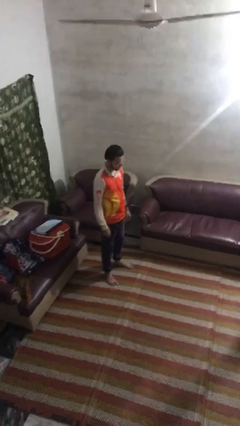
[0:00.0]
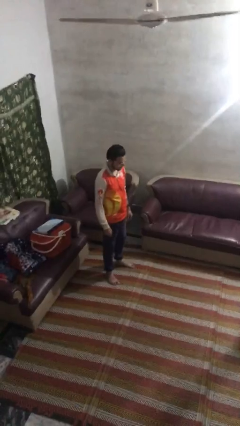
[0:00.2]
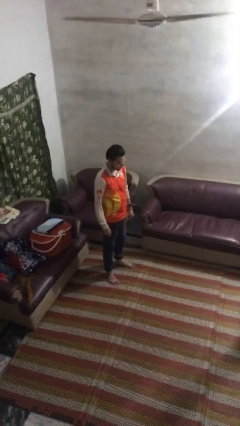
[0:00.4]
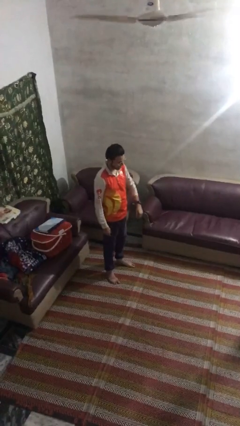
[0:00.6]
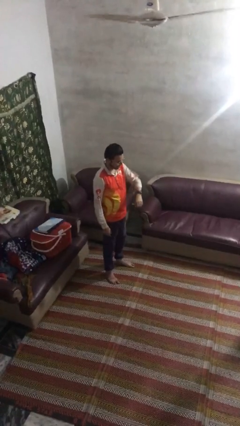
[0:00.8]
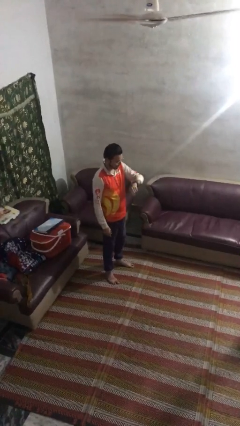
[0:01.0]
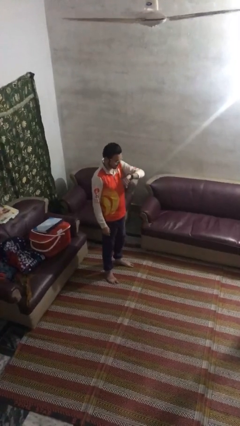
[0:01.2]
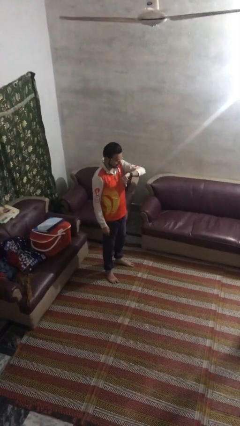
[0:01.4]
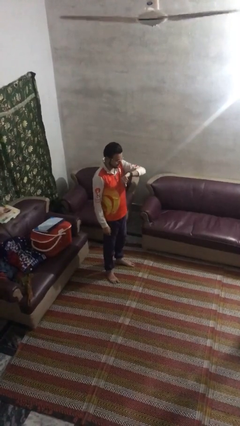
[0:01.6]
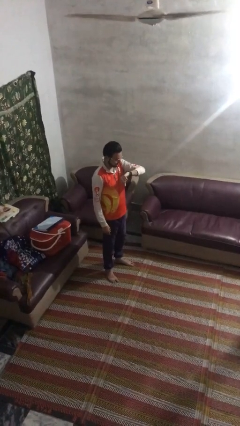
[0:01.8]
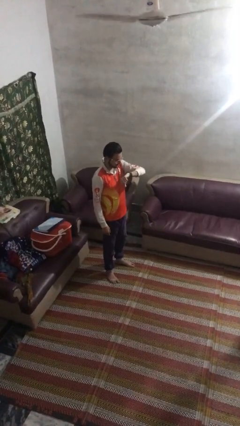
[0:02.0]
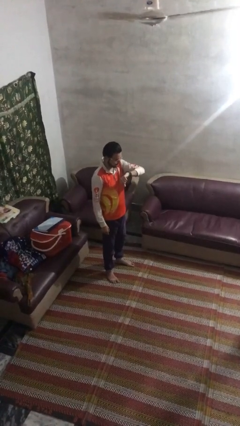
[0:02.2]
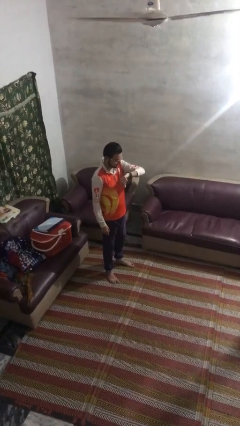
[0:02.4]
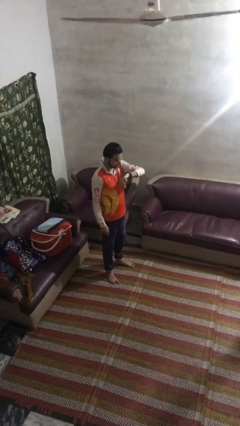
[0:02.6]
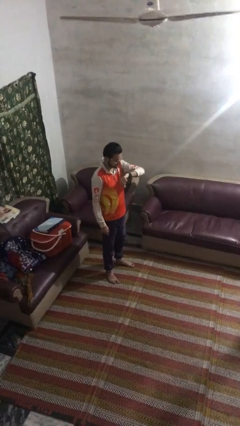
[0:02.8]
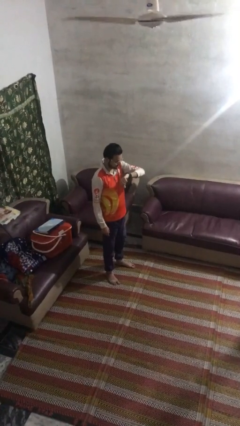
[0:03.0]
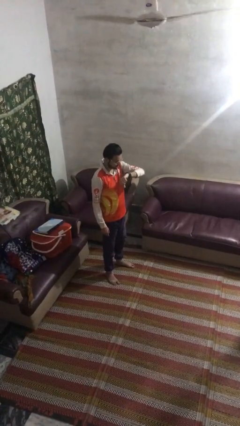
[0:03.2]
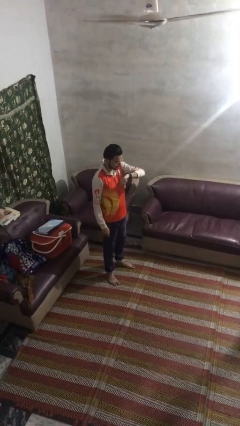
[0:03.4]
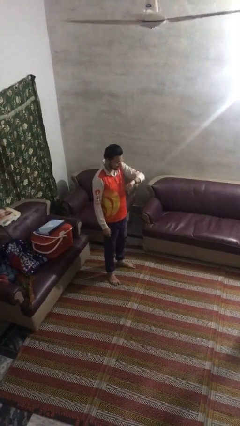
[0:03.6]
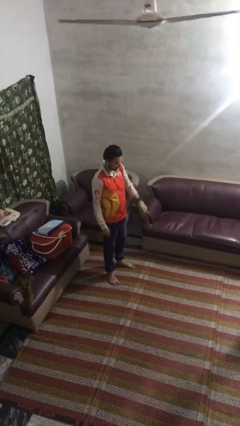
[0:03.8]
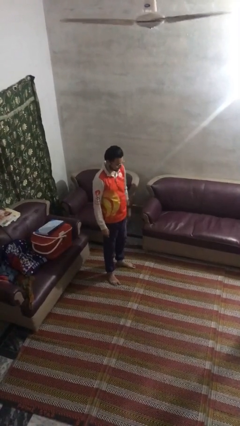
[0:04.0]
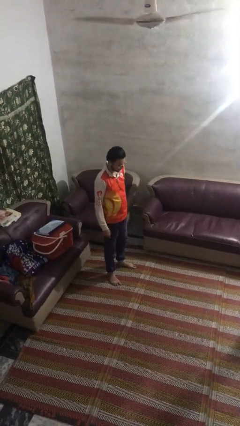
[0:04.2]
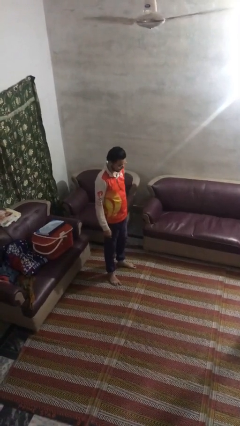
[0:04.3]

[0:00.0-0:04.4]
person looks at wristwatch

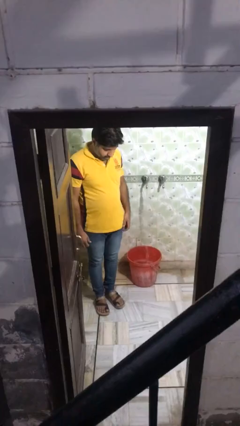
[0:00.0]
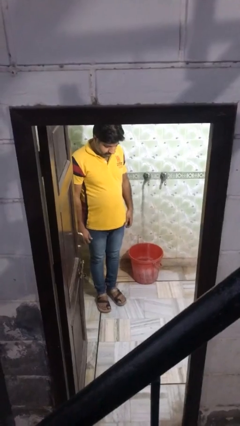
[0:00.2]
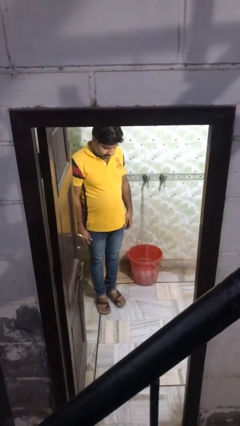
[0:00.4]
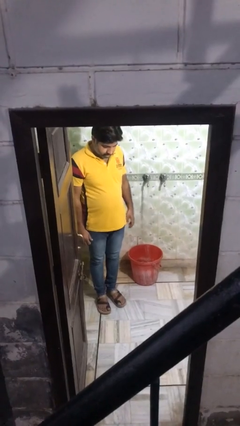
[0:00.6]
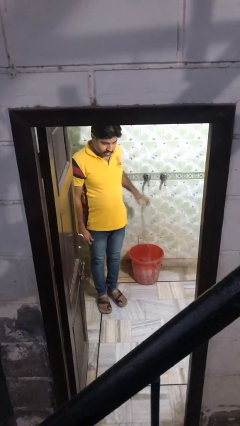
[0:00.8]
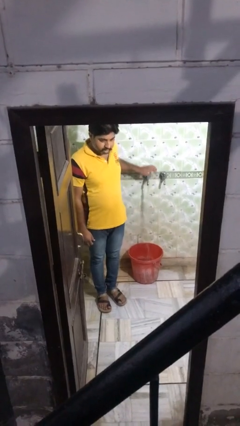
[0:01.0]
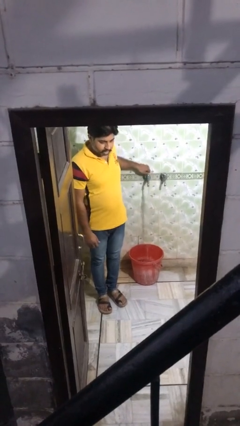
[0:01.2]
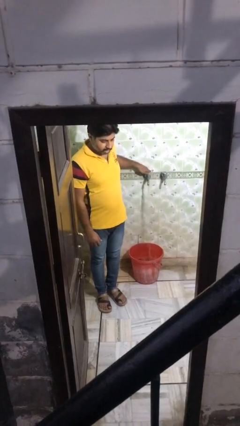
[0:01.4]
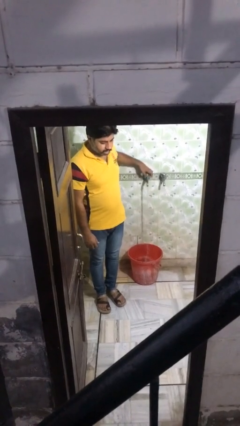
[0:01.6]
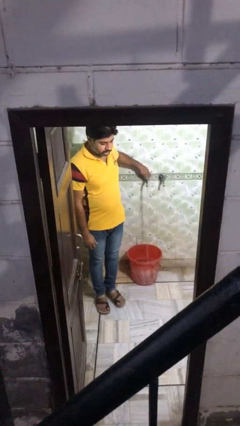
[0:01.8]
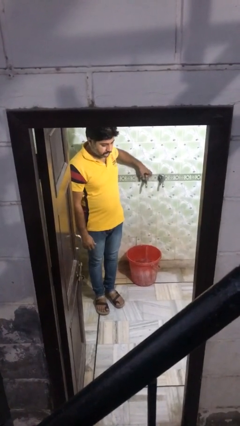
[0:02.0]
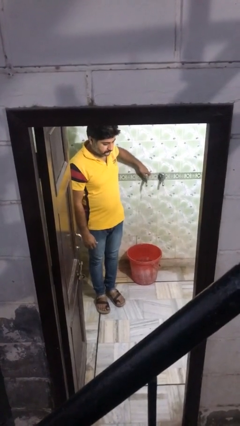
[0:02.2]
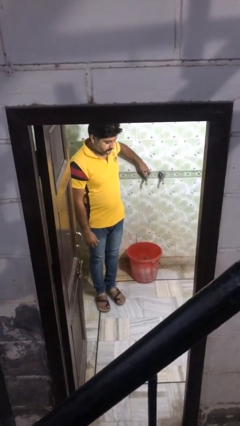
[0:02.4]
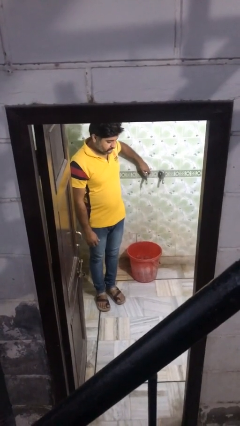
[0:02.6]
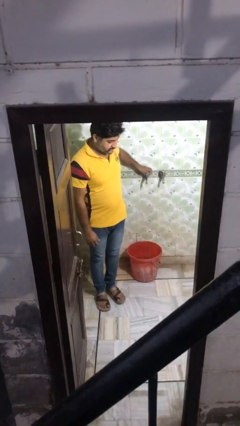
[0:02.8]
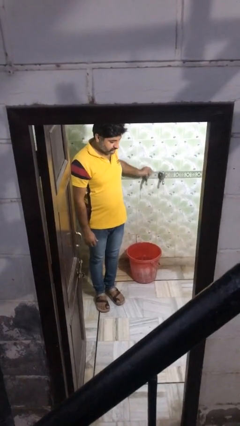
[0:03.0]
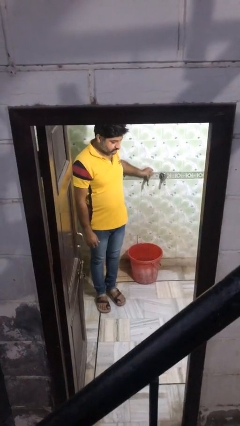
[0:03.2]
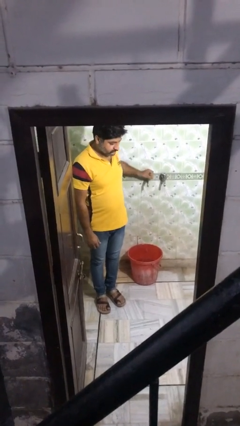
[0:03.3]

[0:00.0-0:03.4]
person turns off faucet

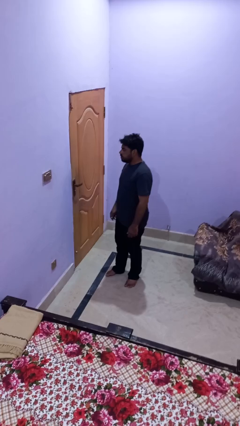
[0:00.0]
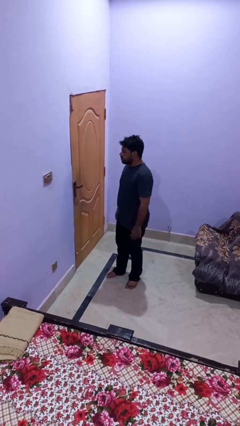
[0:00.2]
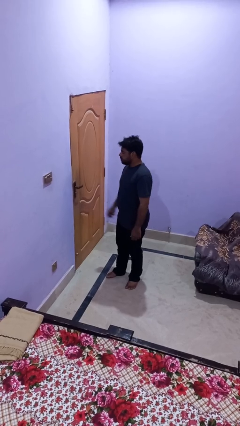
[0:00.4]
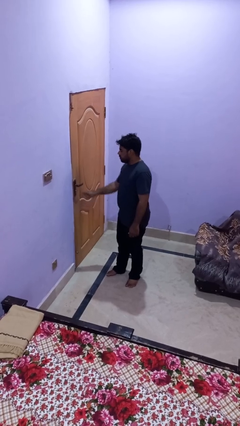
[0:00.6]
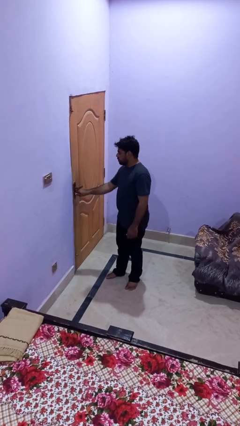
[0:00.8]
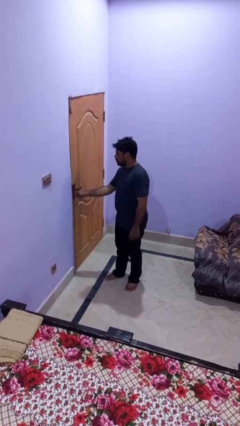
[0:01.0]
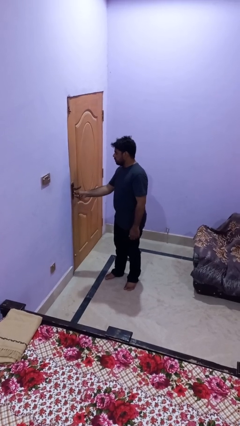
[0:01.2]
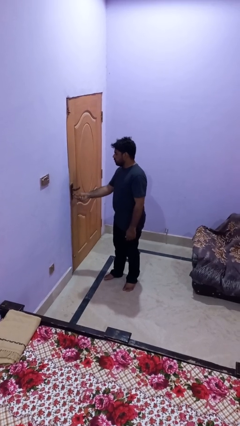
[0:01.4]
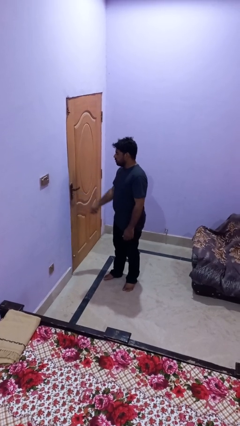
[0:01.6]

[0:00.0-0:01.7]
person unlocks door with keys

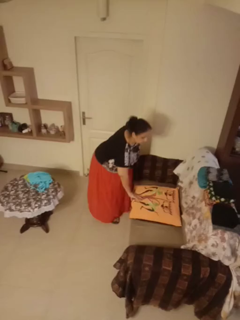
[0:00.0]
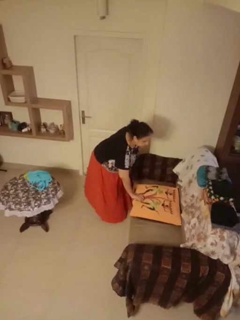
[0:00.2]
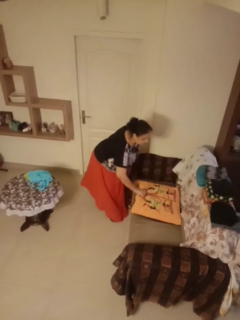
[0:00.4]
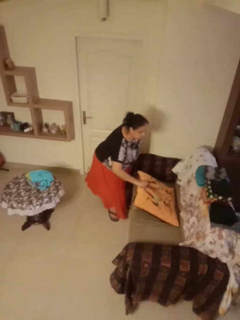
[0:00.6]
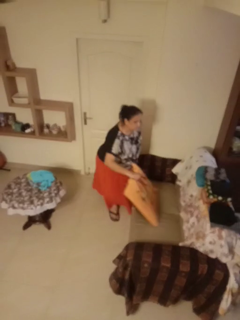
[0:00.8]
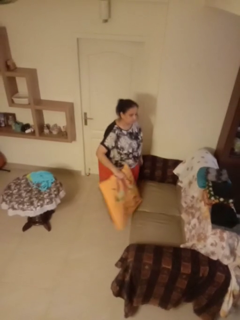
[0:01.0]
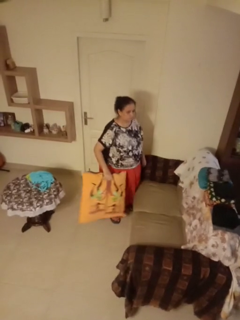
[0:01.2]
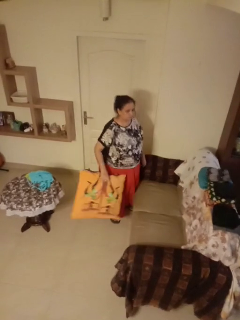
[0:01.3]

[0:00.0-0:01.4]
person picks up object from couch

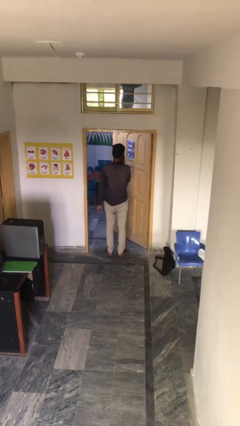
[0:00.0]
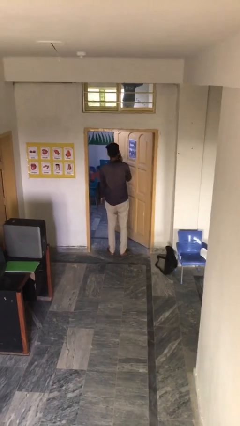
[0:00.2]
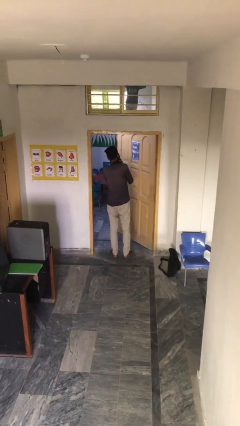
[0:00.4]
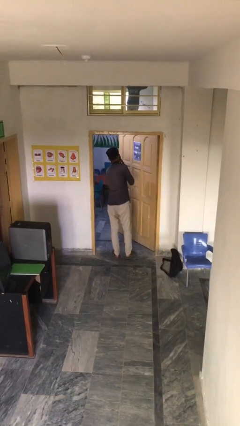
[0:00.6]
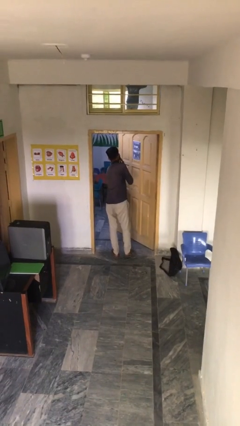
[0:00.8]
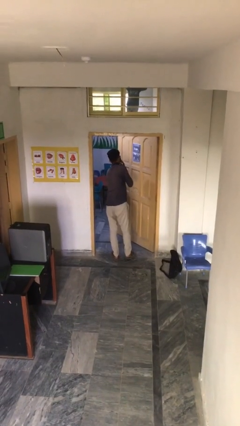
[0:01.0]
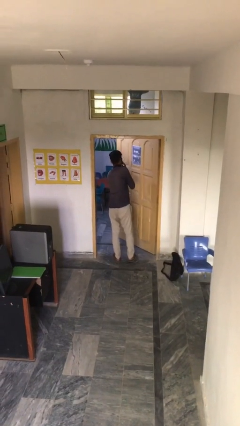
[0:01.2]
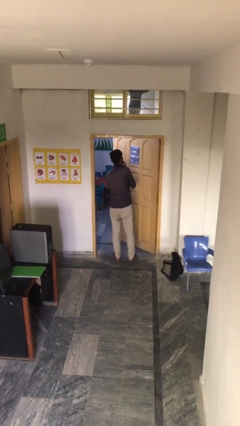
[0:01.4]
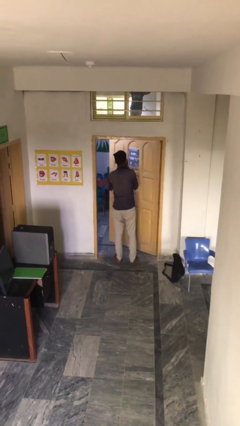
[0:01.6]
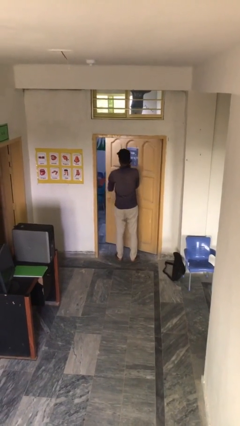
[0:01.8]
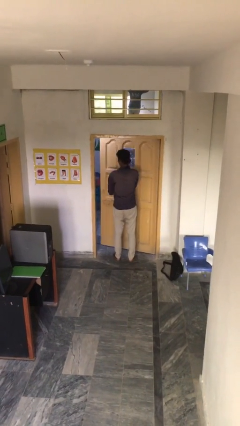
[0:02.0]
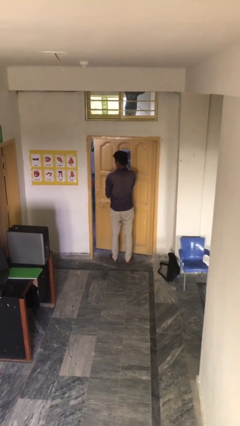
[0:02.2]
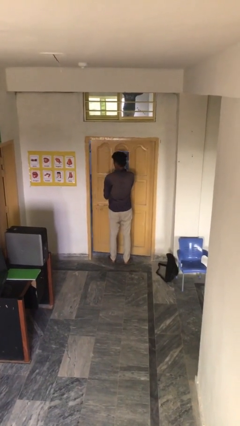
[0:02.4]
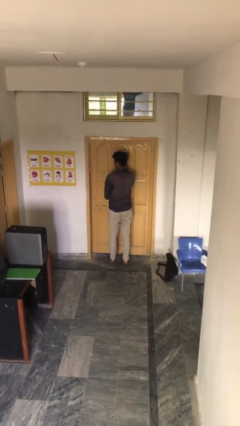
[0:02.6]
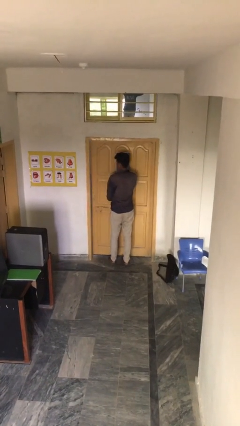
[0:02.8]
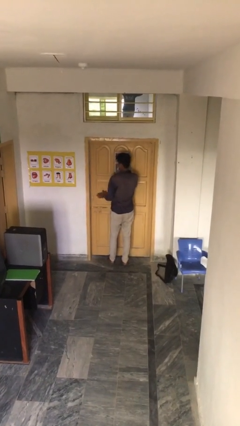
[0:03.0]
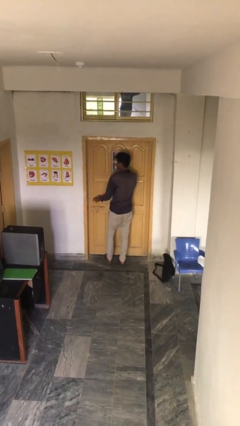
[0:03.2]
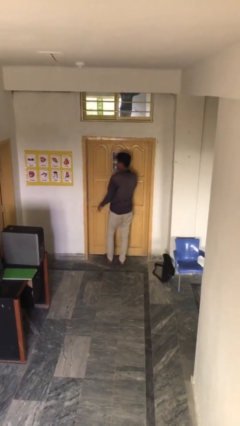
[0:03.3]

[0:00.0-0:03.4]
person closes facility door

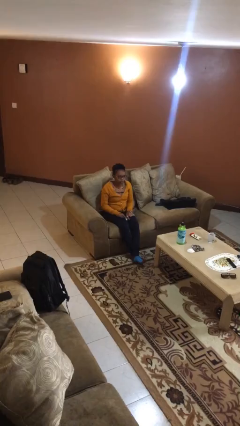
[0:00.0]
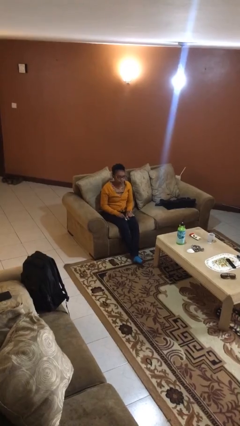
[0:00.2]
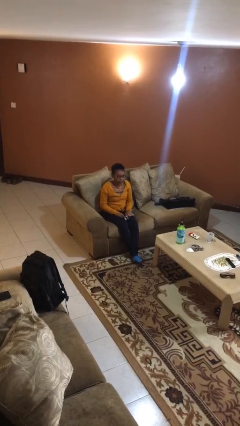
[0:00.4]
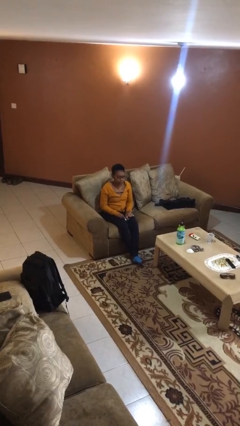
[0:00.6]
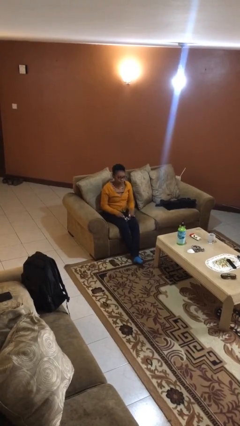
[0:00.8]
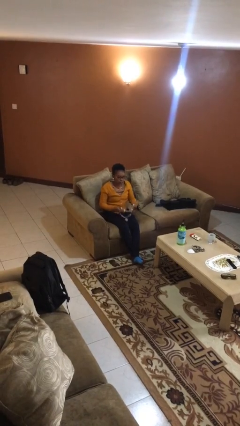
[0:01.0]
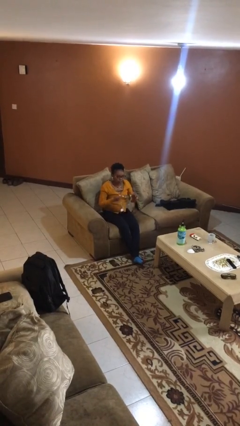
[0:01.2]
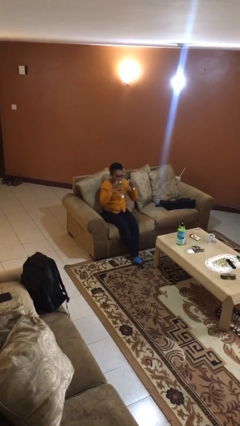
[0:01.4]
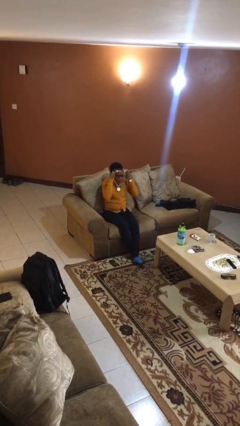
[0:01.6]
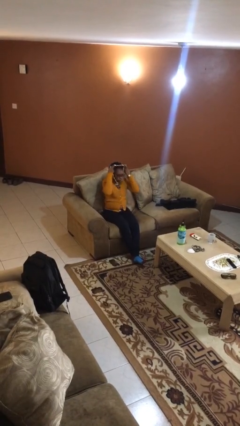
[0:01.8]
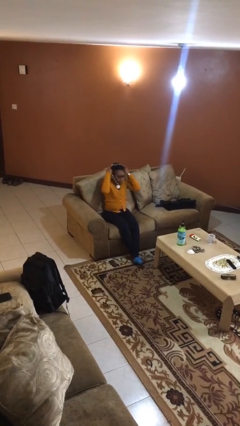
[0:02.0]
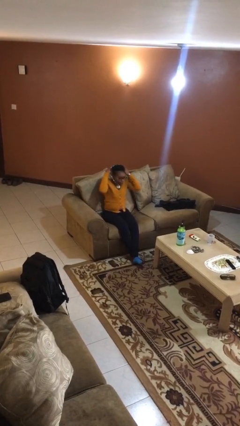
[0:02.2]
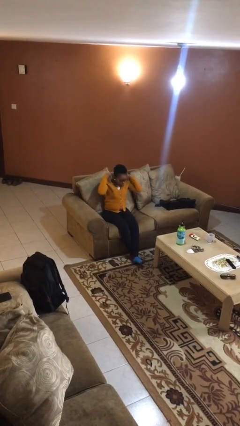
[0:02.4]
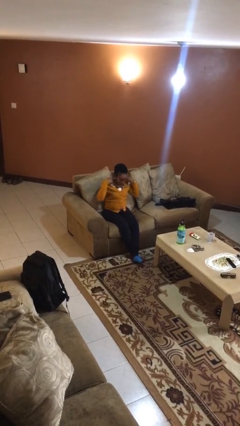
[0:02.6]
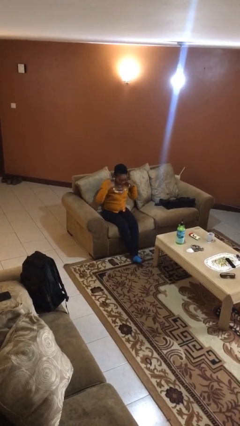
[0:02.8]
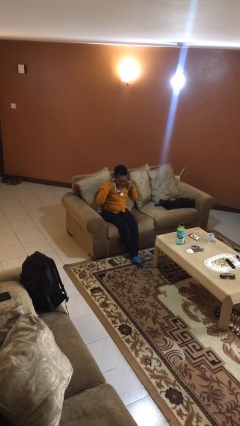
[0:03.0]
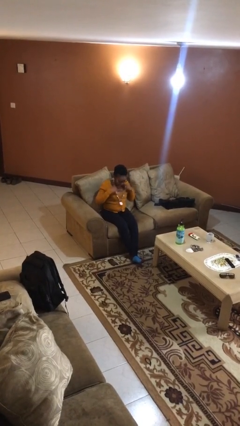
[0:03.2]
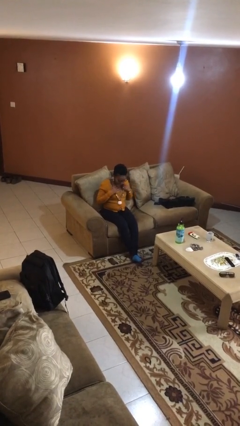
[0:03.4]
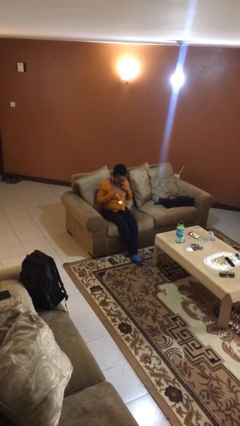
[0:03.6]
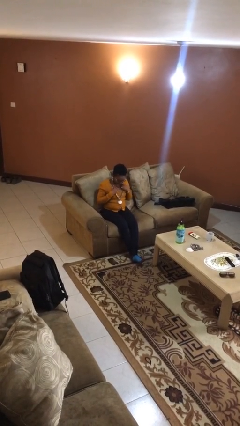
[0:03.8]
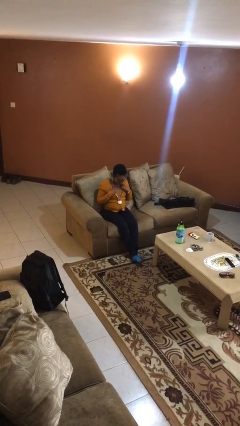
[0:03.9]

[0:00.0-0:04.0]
person puts on necklace
